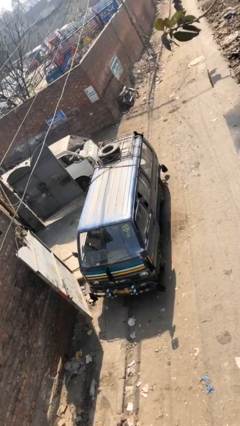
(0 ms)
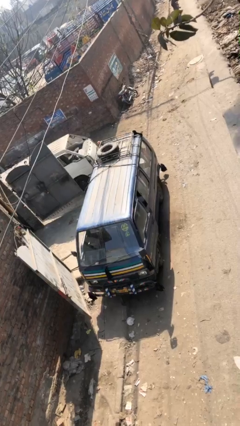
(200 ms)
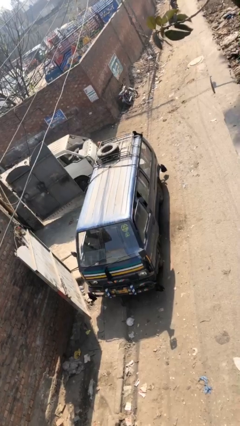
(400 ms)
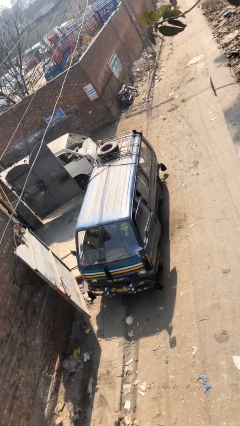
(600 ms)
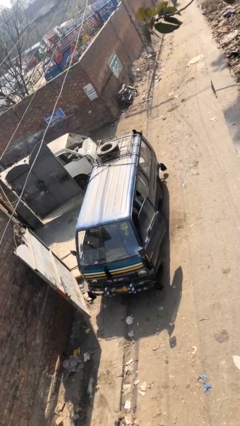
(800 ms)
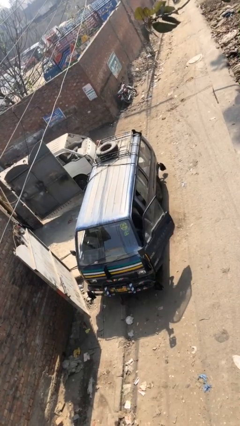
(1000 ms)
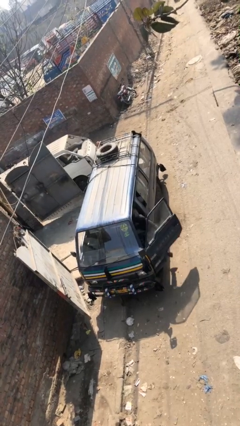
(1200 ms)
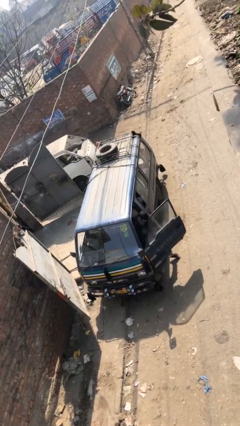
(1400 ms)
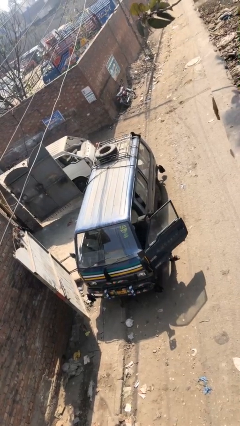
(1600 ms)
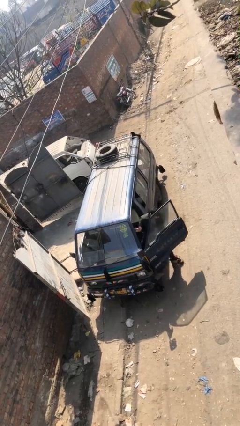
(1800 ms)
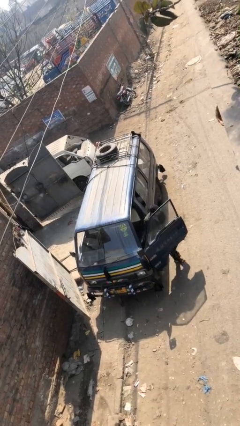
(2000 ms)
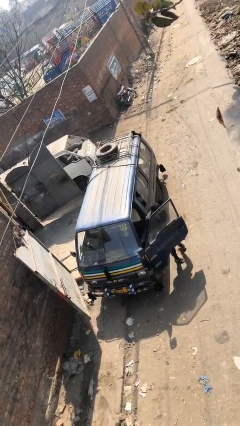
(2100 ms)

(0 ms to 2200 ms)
car drops off person

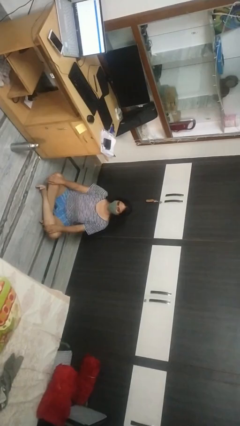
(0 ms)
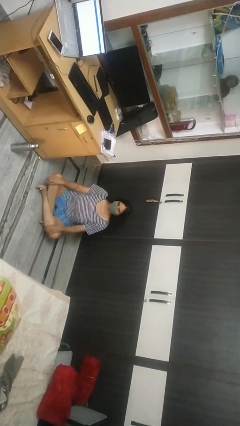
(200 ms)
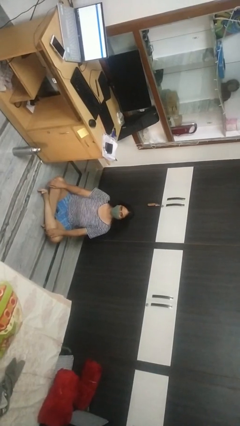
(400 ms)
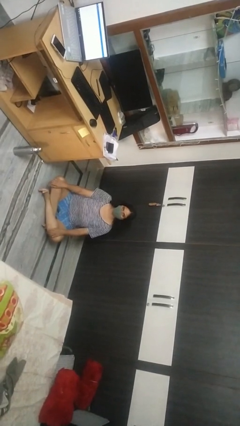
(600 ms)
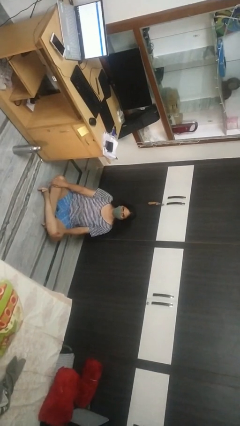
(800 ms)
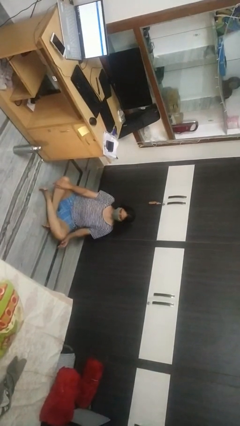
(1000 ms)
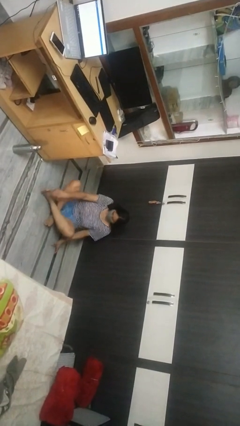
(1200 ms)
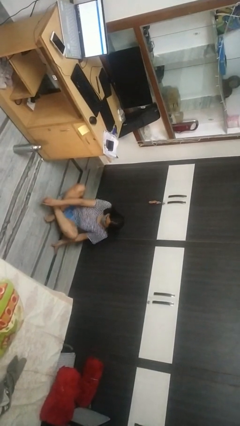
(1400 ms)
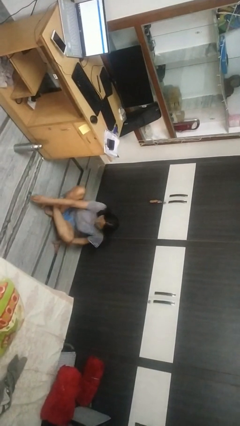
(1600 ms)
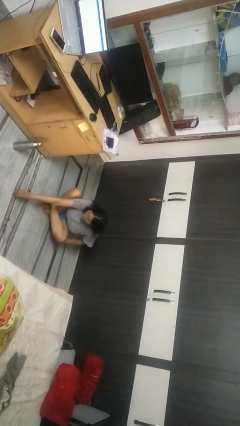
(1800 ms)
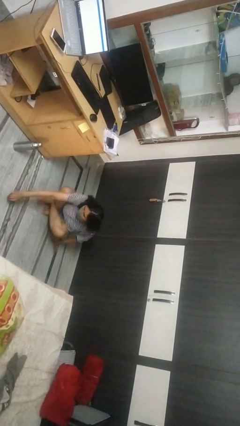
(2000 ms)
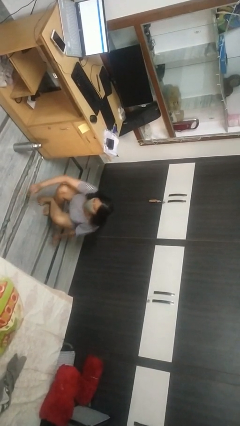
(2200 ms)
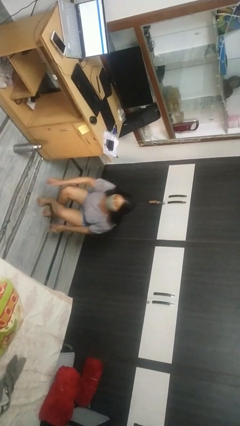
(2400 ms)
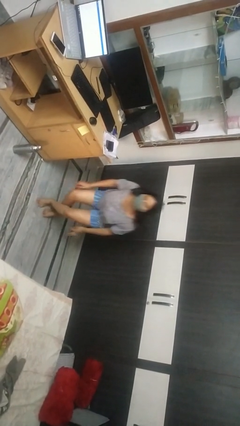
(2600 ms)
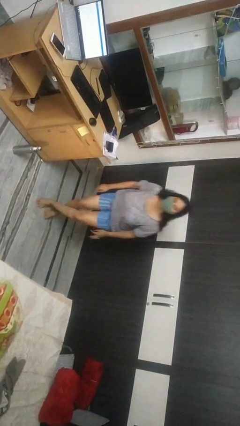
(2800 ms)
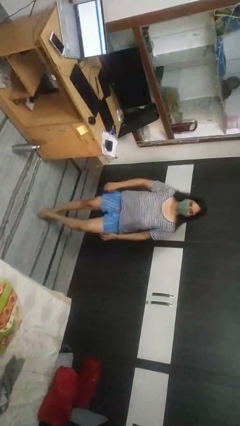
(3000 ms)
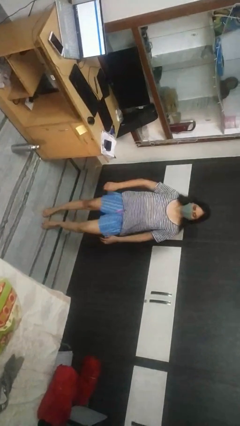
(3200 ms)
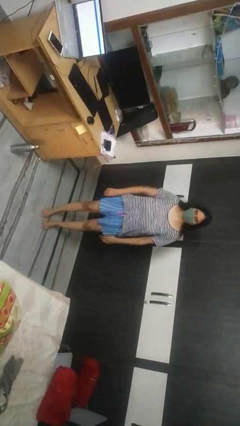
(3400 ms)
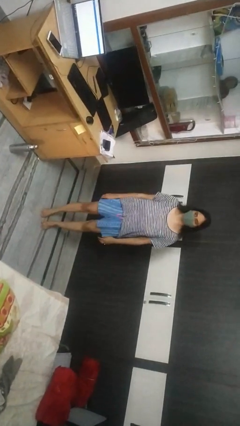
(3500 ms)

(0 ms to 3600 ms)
person stands up from floor

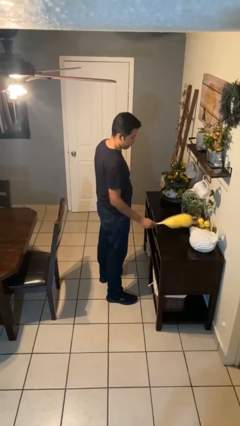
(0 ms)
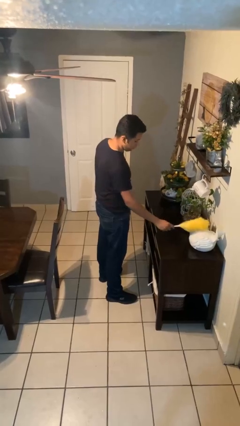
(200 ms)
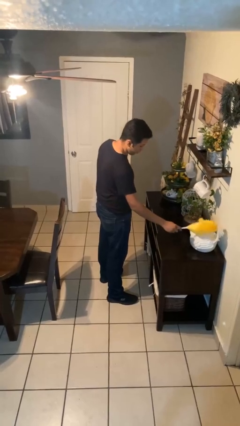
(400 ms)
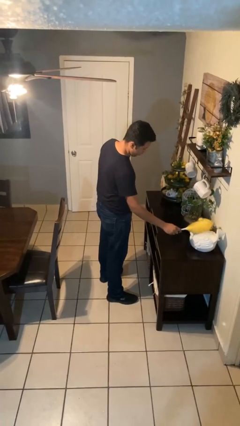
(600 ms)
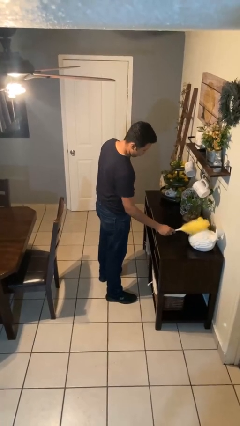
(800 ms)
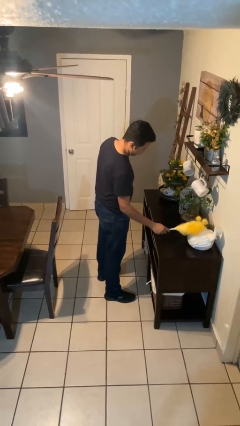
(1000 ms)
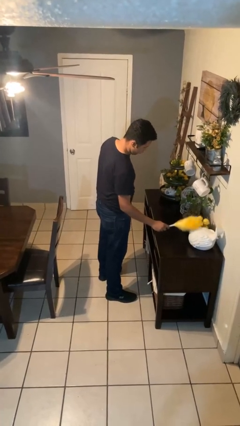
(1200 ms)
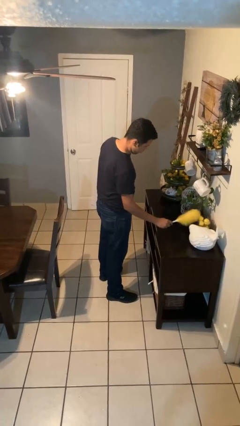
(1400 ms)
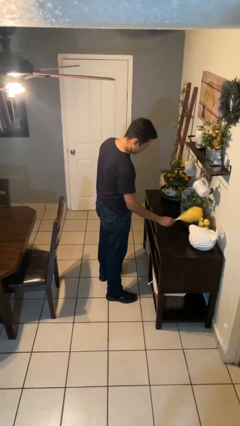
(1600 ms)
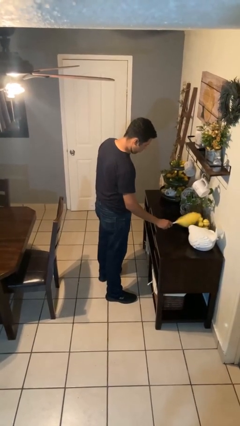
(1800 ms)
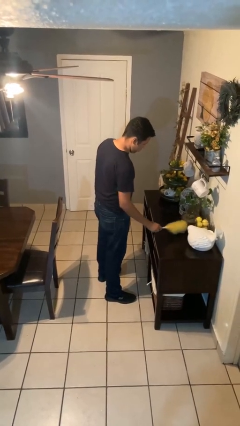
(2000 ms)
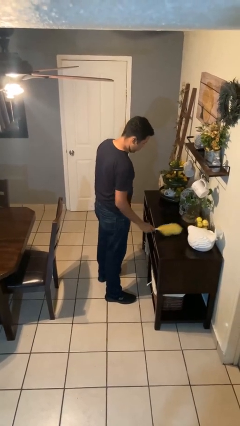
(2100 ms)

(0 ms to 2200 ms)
person dusts furniture

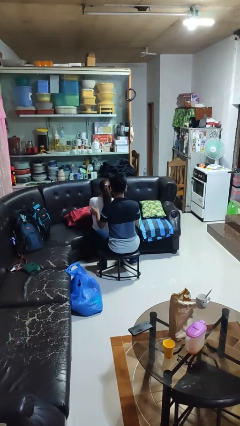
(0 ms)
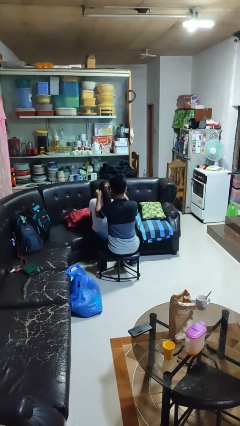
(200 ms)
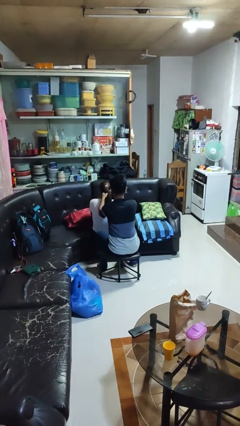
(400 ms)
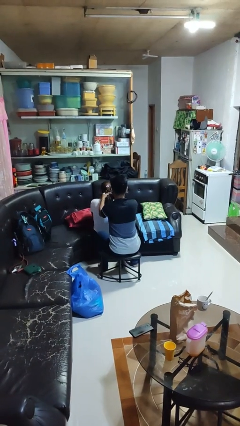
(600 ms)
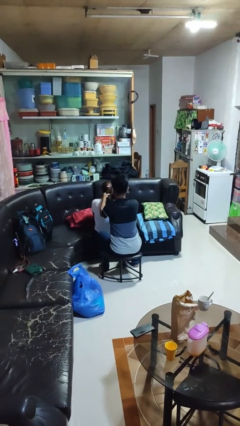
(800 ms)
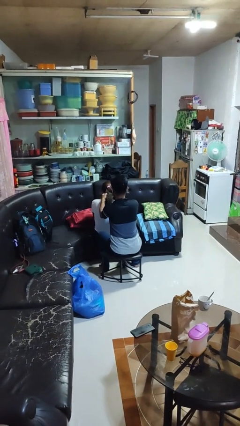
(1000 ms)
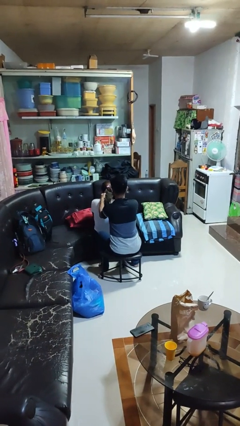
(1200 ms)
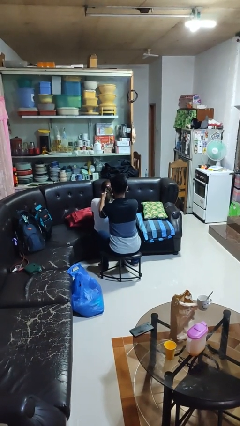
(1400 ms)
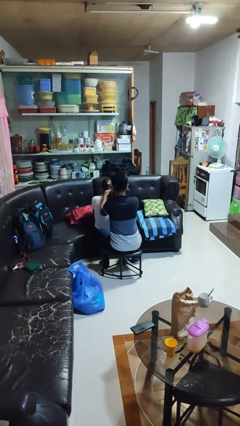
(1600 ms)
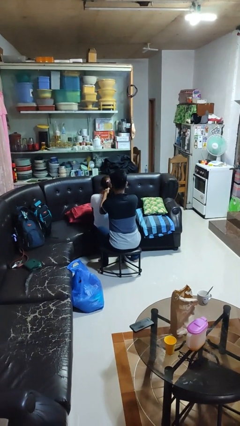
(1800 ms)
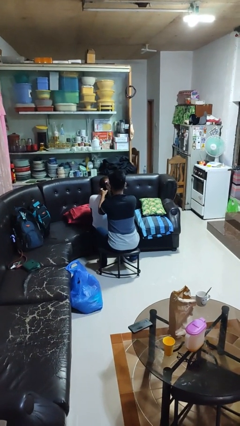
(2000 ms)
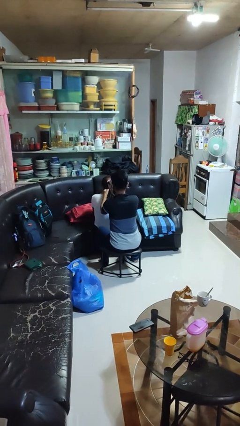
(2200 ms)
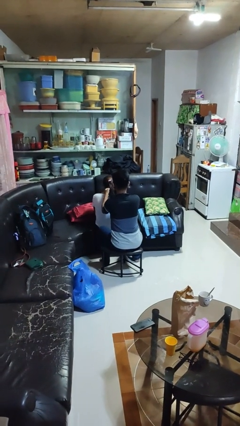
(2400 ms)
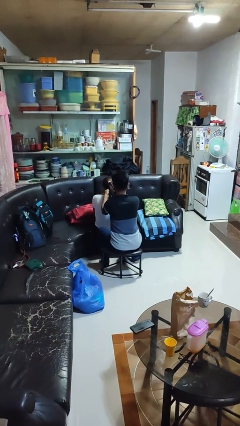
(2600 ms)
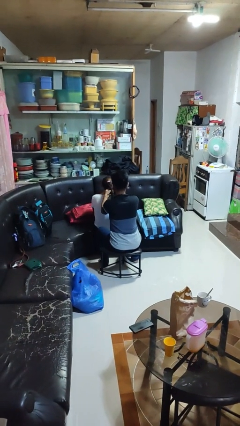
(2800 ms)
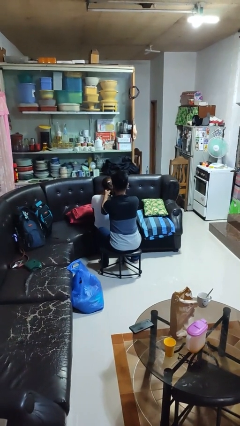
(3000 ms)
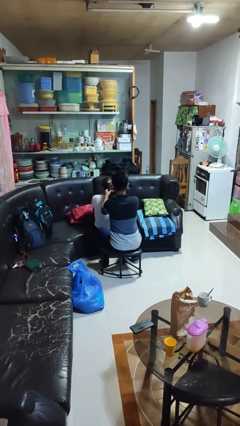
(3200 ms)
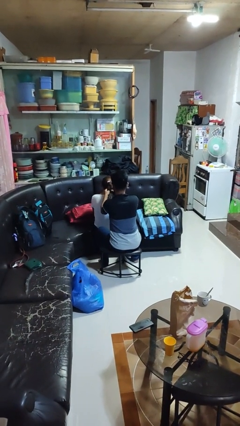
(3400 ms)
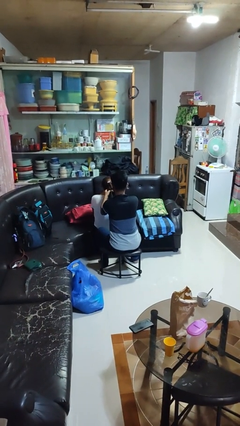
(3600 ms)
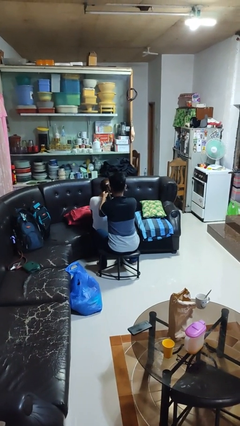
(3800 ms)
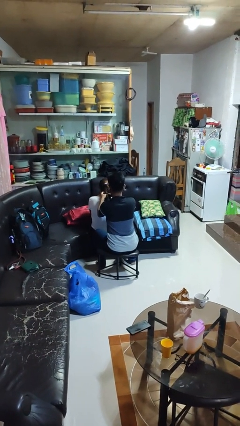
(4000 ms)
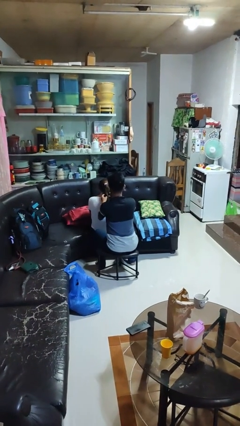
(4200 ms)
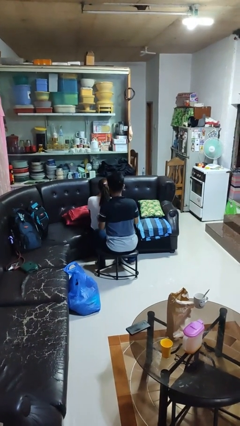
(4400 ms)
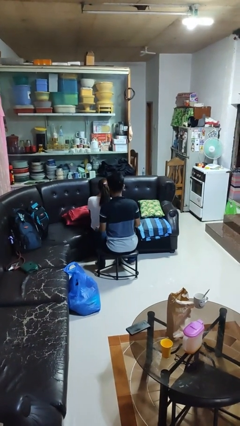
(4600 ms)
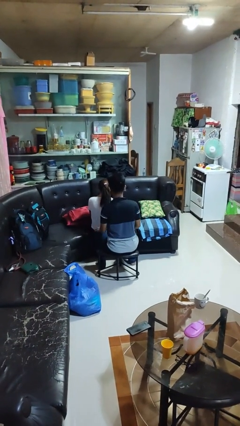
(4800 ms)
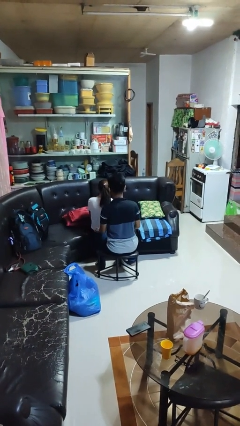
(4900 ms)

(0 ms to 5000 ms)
person braids hair of person

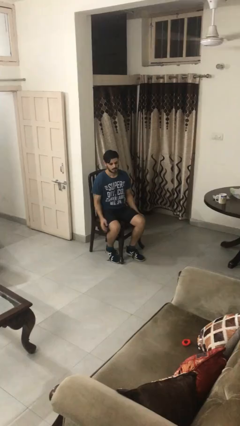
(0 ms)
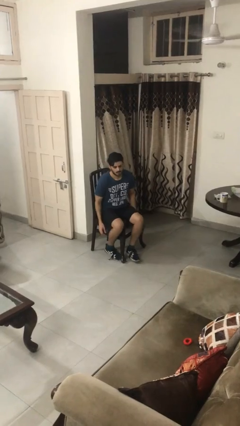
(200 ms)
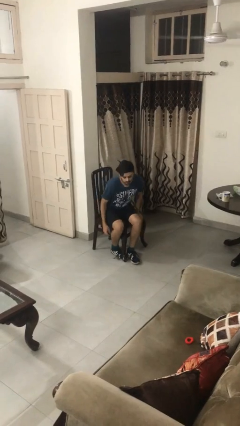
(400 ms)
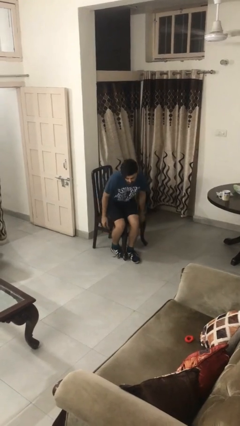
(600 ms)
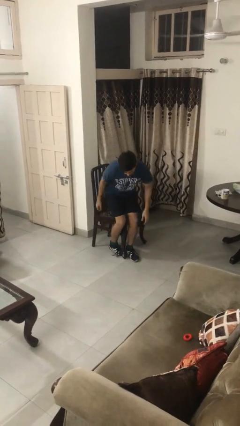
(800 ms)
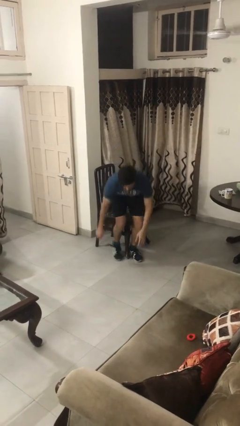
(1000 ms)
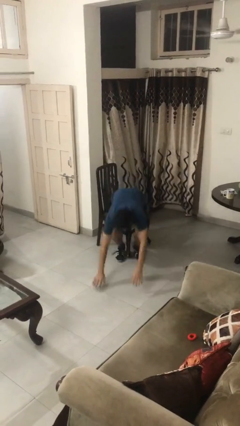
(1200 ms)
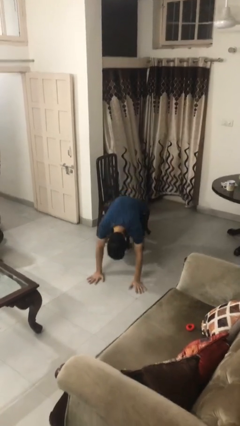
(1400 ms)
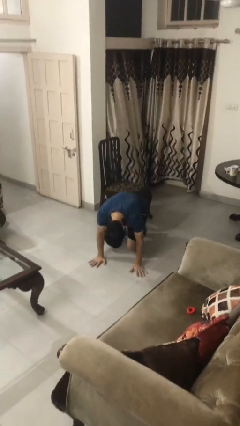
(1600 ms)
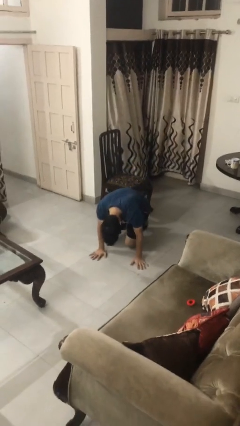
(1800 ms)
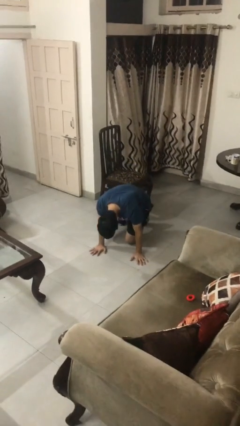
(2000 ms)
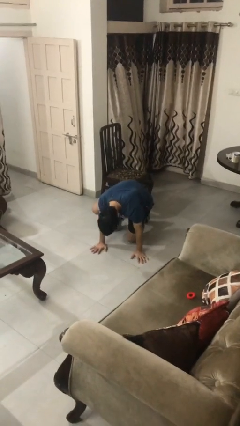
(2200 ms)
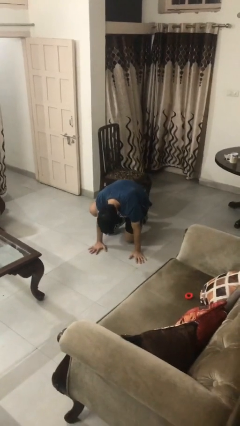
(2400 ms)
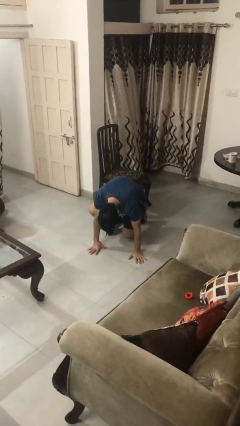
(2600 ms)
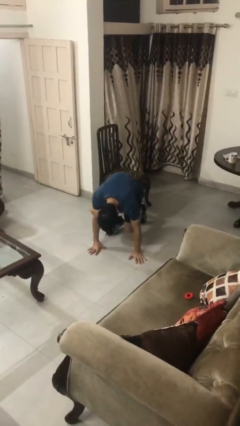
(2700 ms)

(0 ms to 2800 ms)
person falls from chair

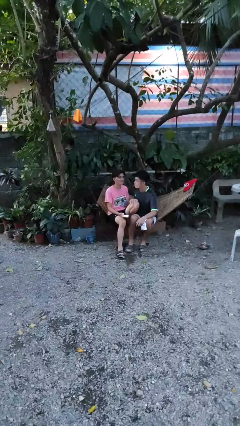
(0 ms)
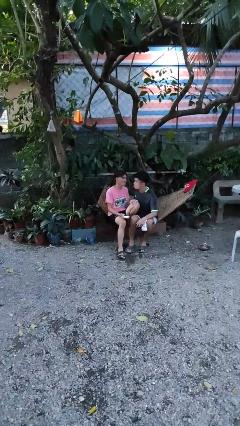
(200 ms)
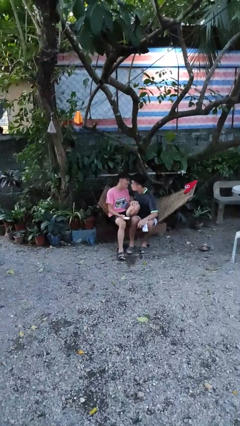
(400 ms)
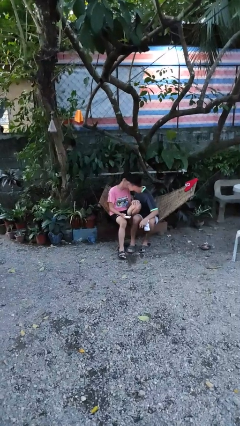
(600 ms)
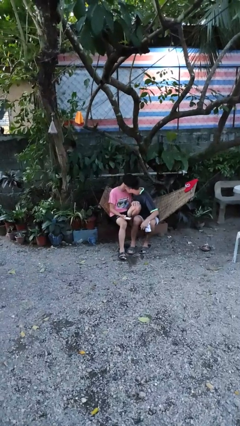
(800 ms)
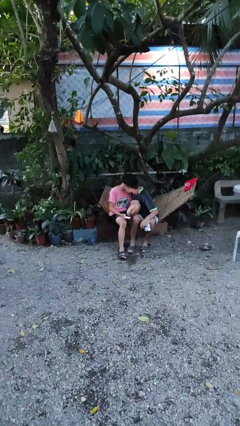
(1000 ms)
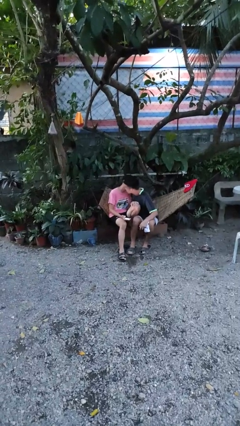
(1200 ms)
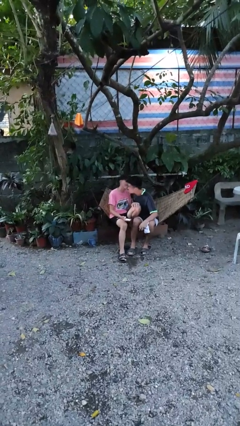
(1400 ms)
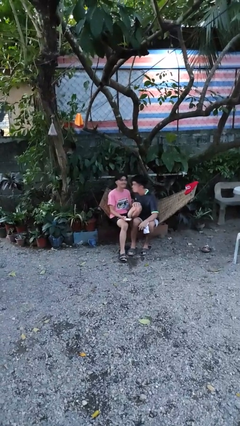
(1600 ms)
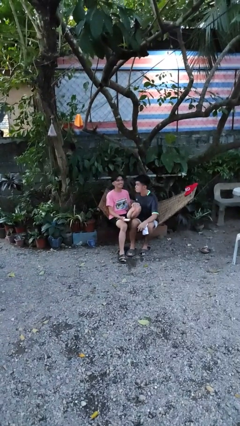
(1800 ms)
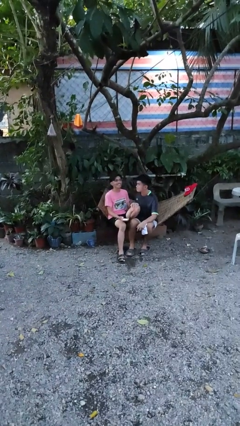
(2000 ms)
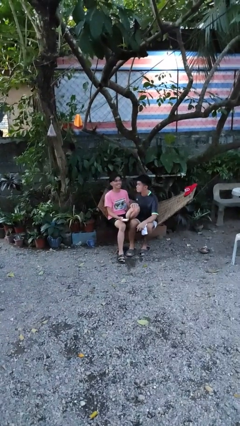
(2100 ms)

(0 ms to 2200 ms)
person kisses cheek of person
